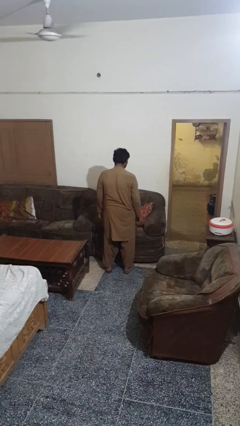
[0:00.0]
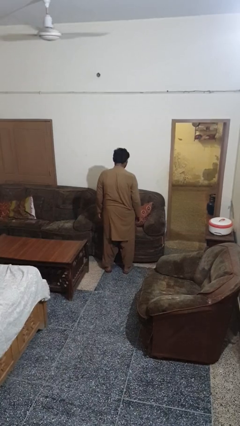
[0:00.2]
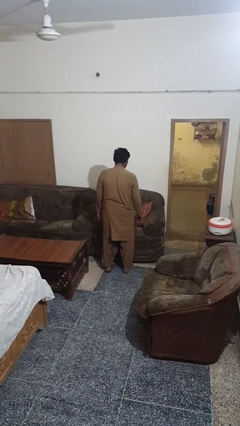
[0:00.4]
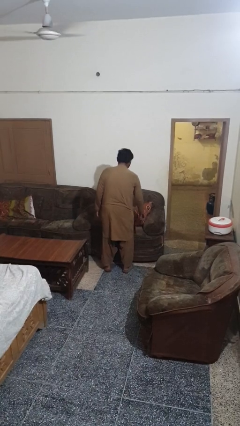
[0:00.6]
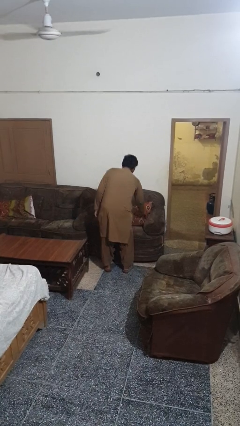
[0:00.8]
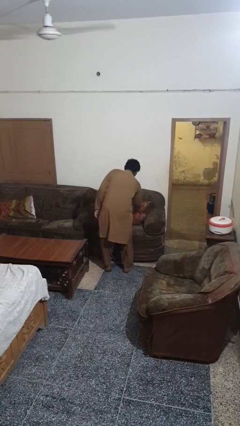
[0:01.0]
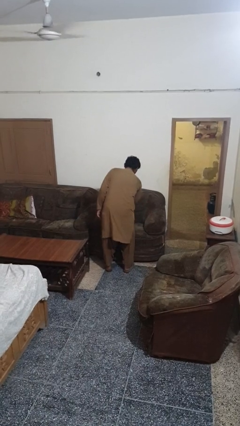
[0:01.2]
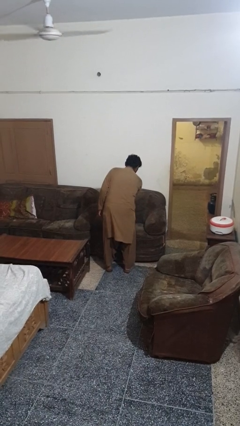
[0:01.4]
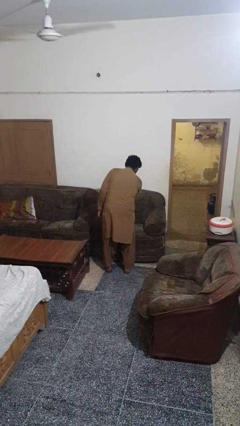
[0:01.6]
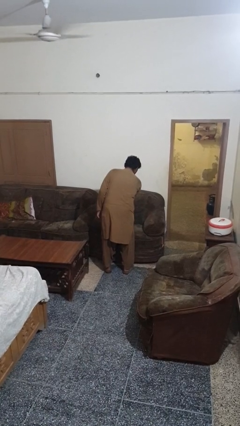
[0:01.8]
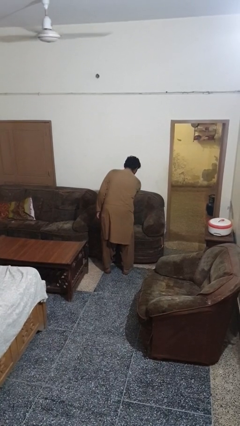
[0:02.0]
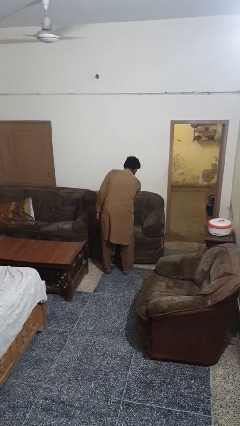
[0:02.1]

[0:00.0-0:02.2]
person searches in couch

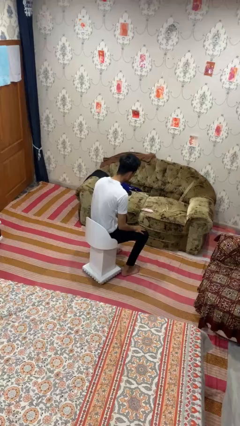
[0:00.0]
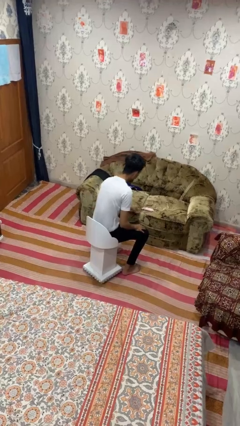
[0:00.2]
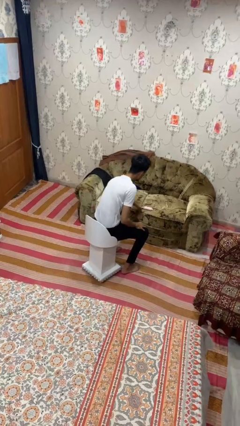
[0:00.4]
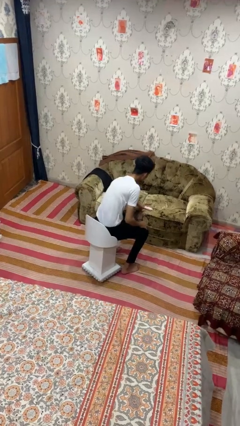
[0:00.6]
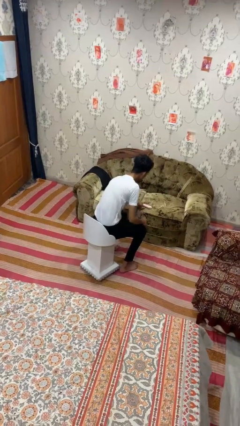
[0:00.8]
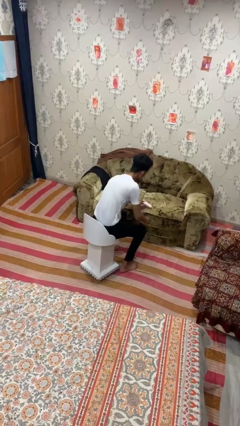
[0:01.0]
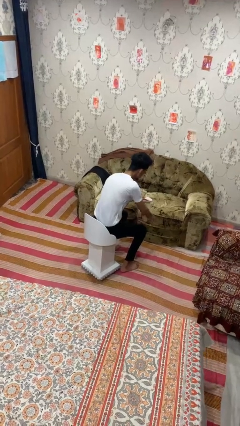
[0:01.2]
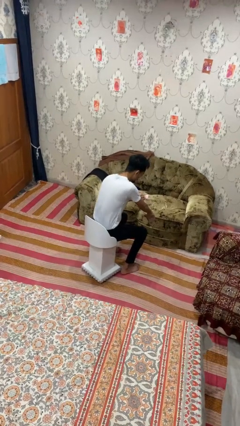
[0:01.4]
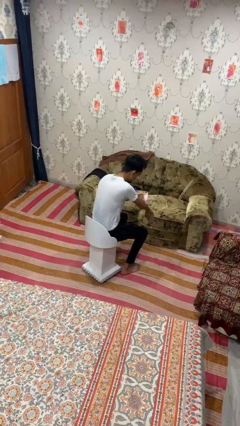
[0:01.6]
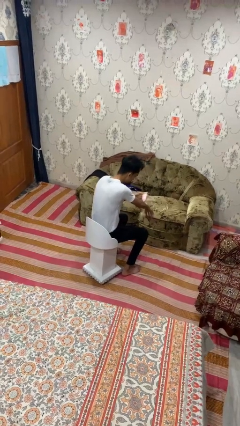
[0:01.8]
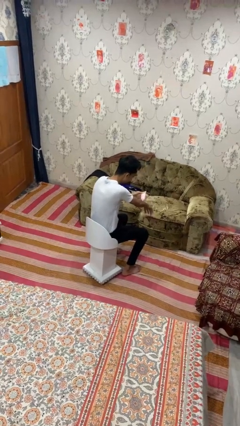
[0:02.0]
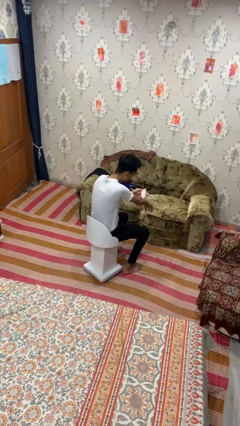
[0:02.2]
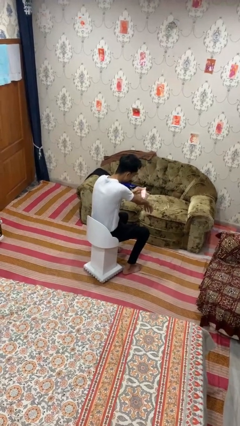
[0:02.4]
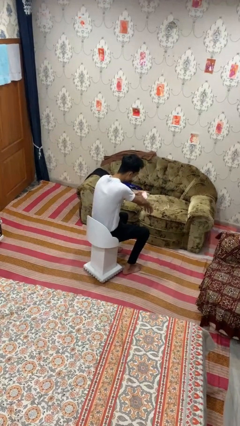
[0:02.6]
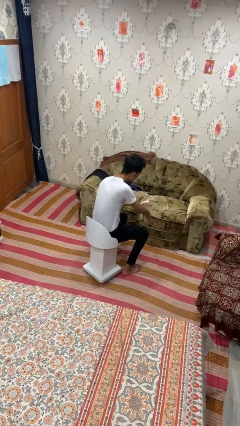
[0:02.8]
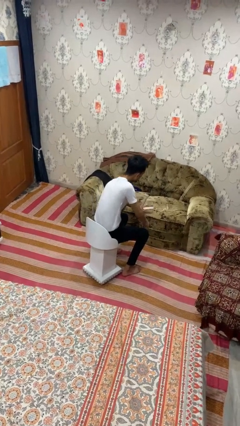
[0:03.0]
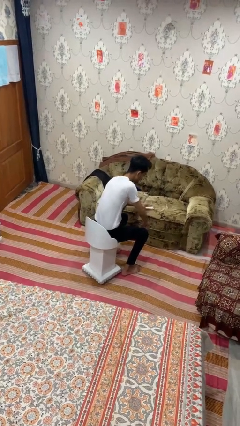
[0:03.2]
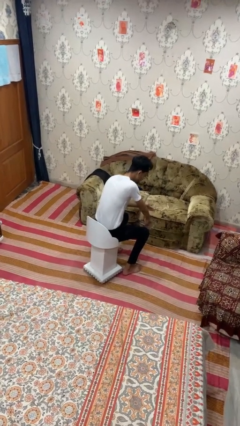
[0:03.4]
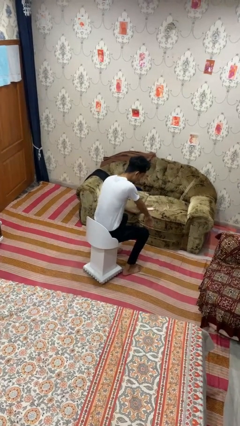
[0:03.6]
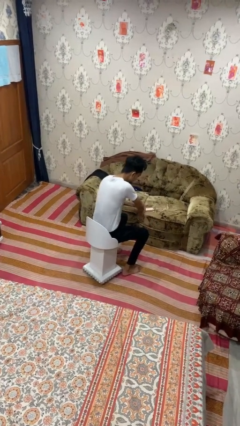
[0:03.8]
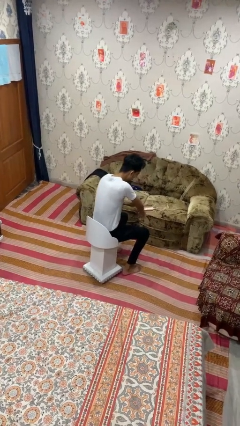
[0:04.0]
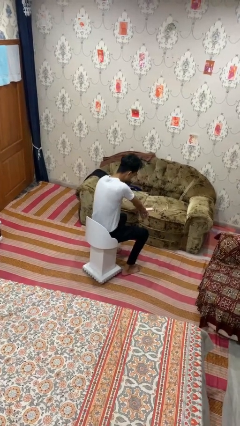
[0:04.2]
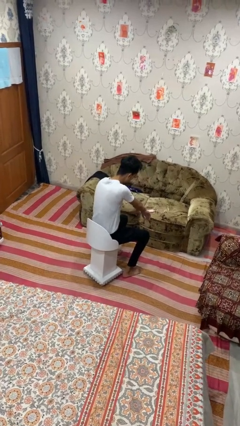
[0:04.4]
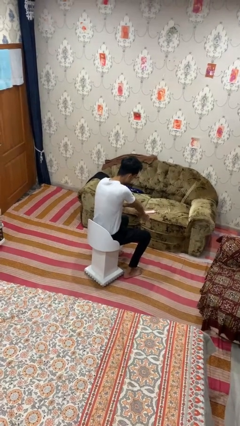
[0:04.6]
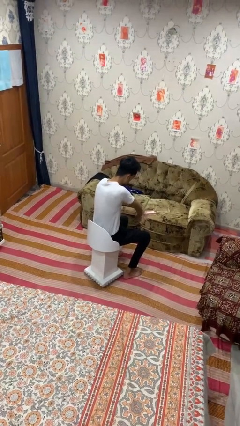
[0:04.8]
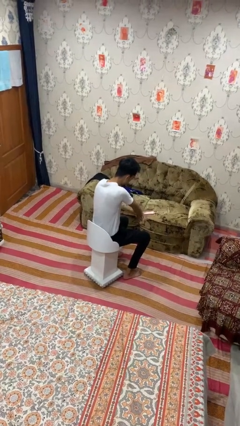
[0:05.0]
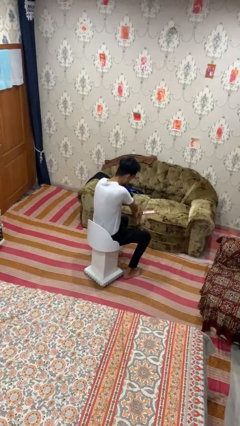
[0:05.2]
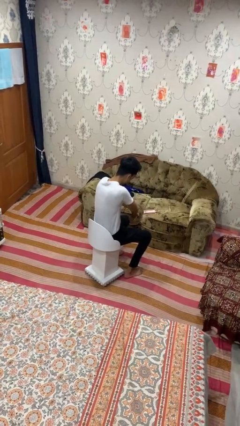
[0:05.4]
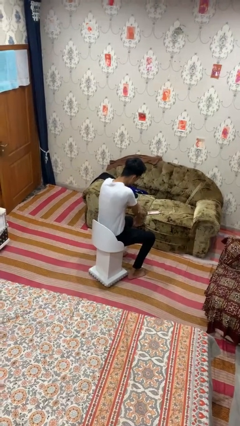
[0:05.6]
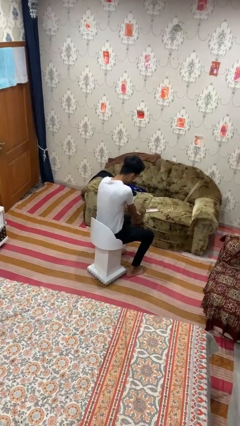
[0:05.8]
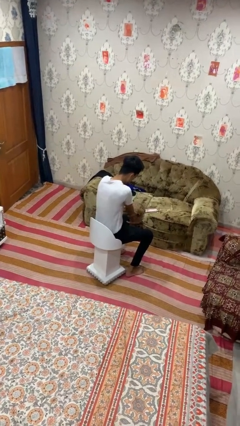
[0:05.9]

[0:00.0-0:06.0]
person applies sunscreen

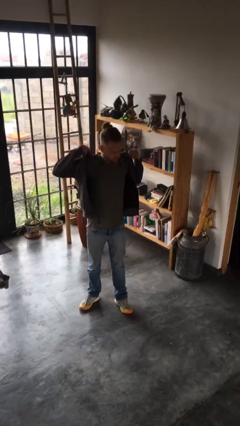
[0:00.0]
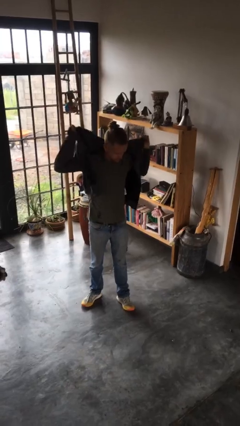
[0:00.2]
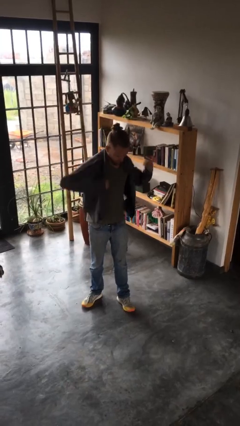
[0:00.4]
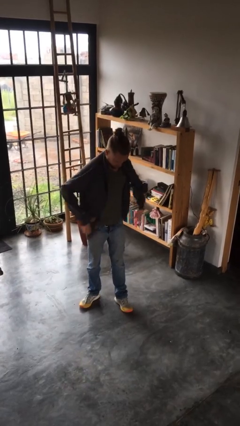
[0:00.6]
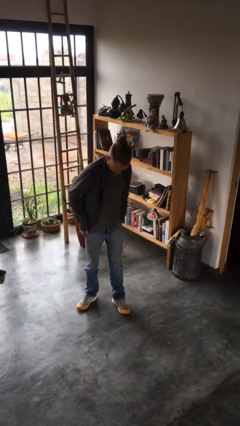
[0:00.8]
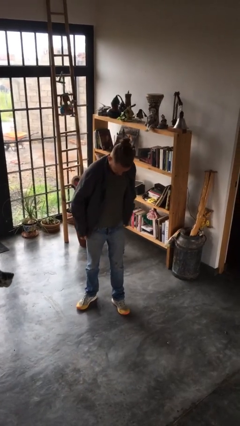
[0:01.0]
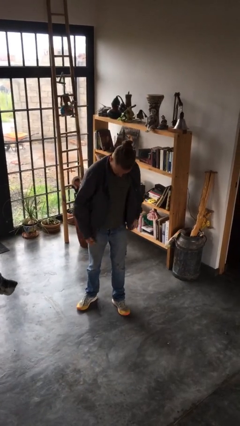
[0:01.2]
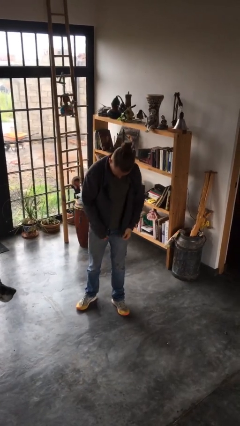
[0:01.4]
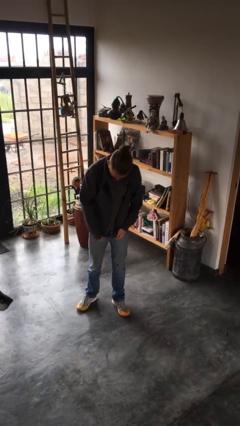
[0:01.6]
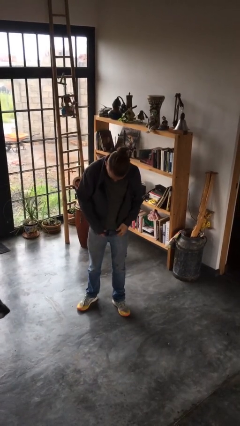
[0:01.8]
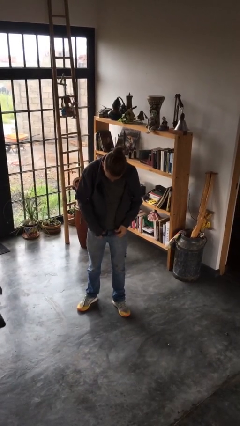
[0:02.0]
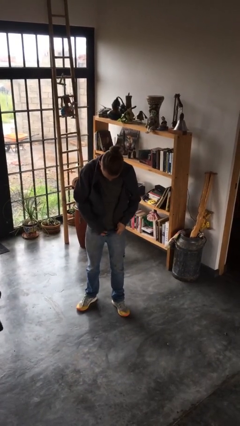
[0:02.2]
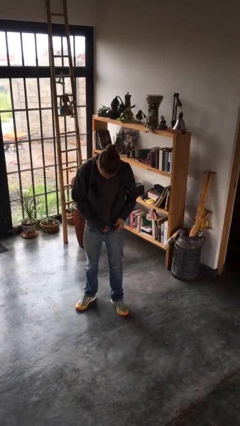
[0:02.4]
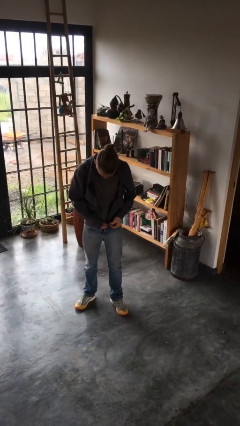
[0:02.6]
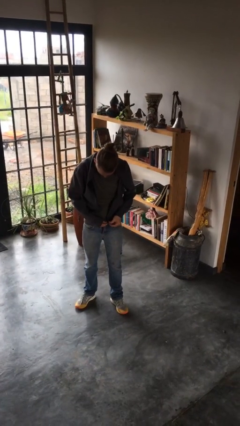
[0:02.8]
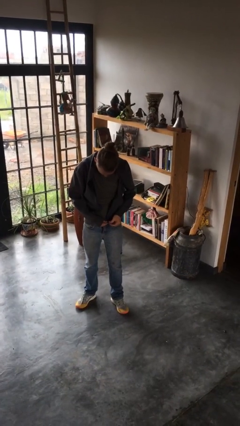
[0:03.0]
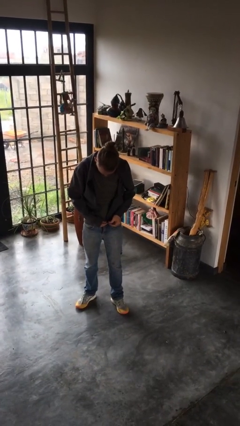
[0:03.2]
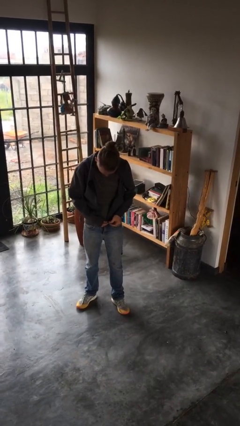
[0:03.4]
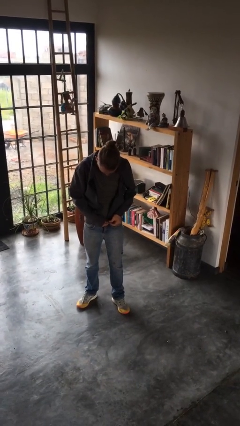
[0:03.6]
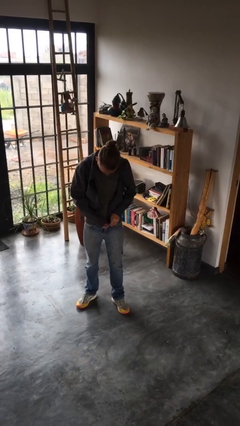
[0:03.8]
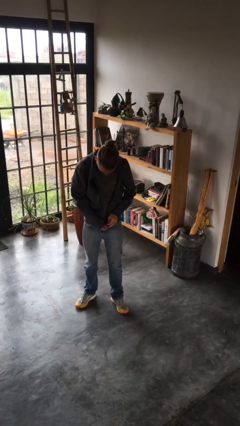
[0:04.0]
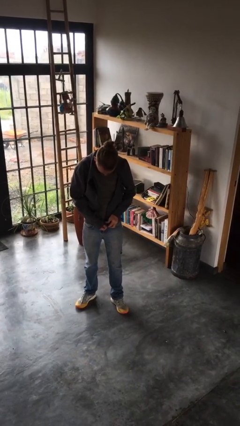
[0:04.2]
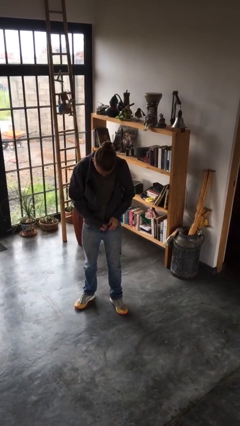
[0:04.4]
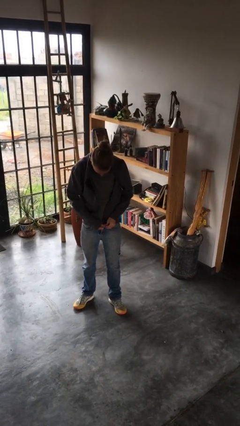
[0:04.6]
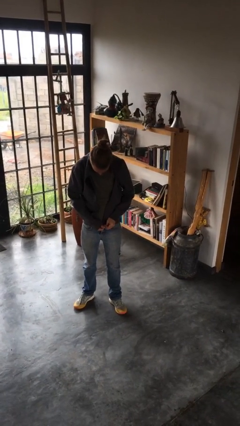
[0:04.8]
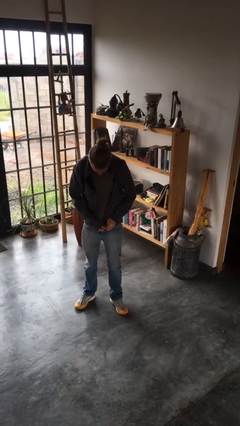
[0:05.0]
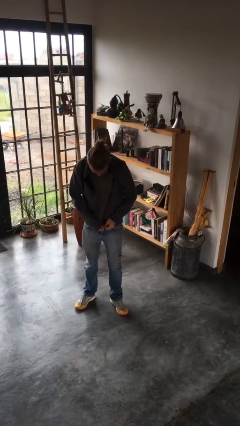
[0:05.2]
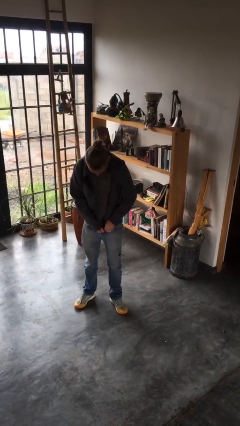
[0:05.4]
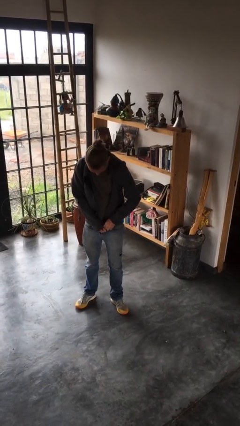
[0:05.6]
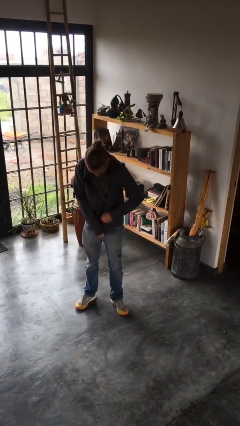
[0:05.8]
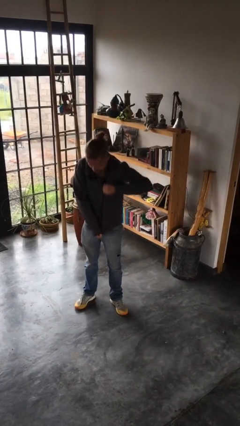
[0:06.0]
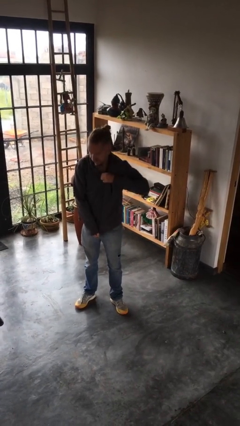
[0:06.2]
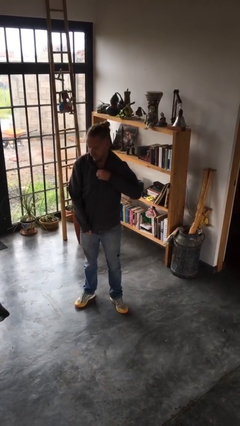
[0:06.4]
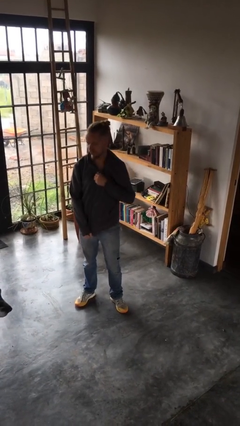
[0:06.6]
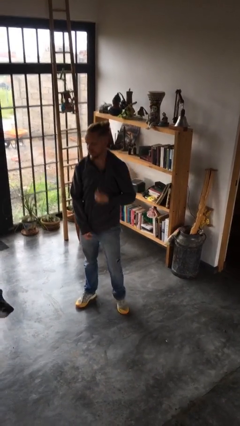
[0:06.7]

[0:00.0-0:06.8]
person zips up jacket

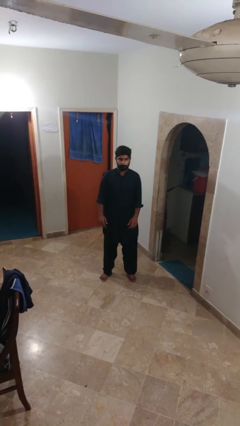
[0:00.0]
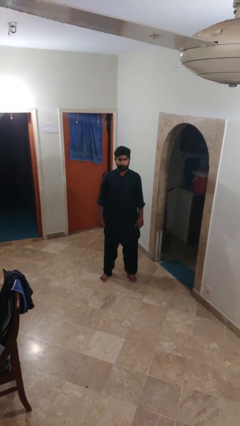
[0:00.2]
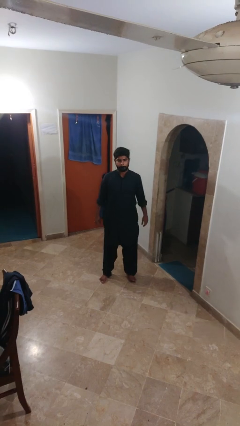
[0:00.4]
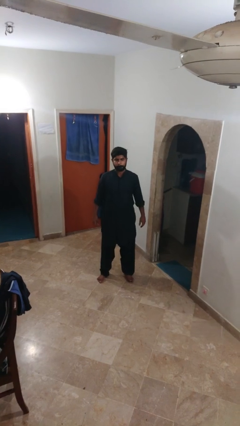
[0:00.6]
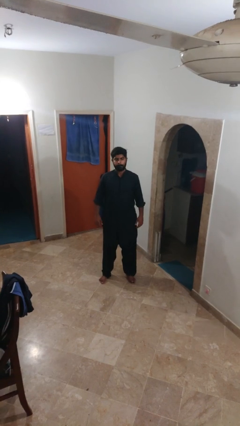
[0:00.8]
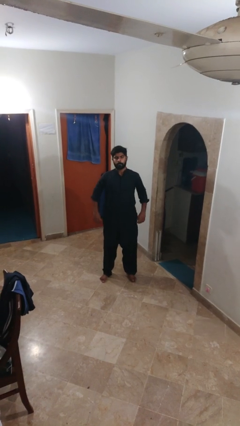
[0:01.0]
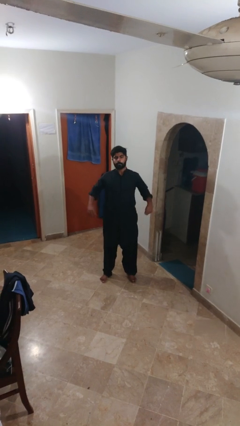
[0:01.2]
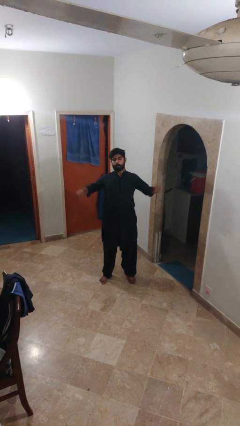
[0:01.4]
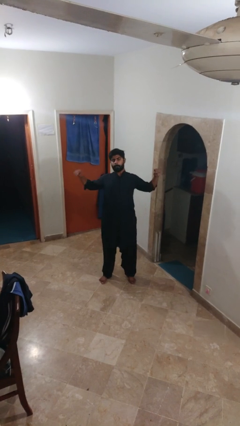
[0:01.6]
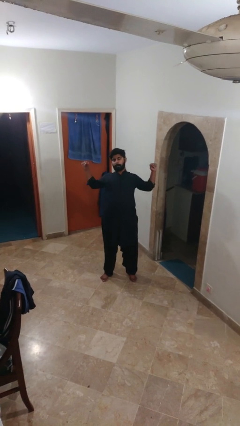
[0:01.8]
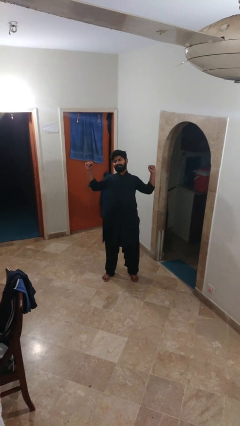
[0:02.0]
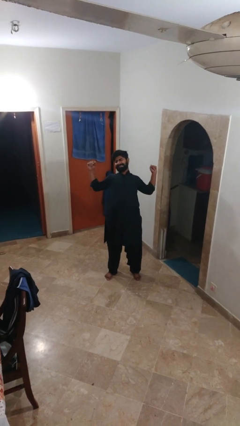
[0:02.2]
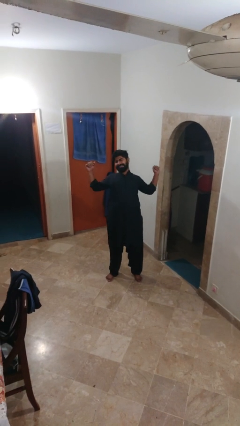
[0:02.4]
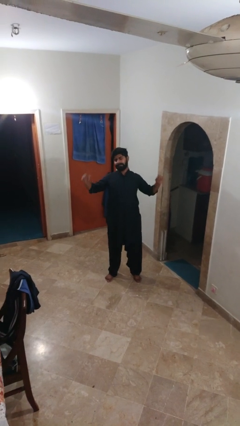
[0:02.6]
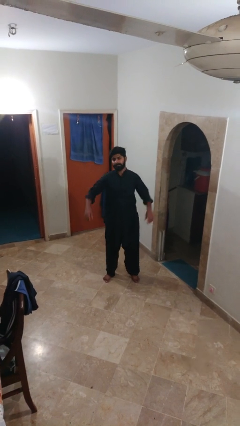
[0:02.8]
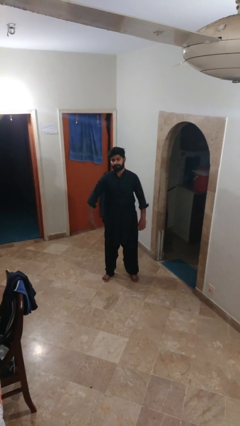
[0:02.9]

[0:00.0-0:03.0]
person stretches arms to side
